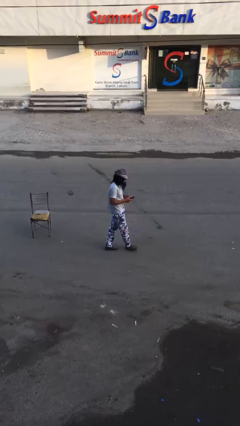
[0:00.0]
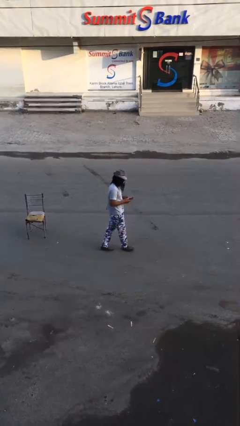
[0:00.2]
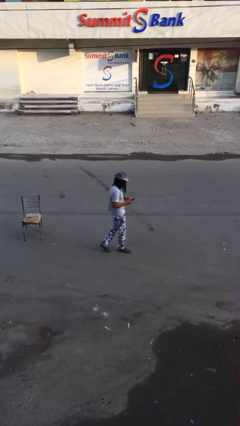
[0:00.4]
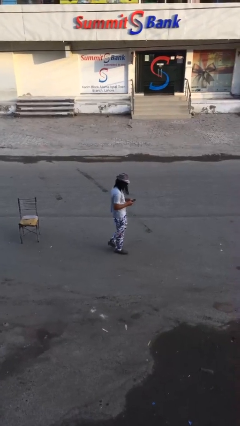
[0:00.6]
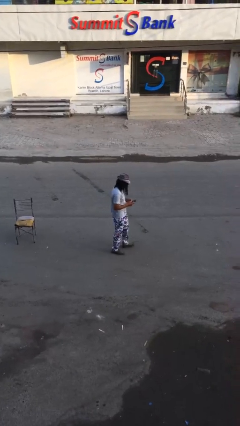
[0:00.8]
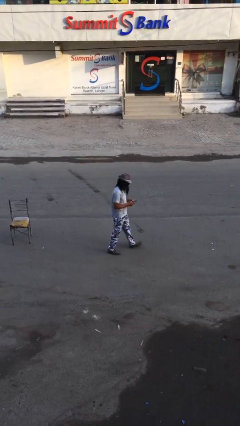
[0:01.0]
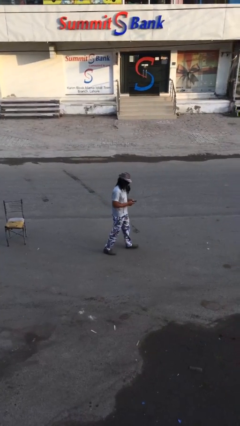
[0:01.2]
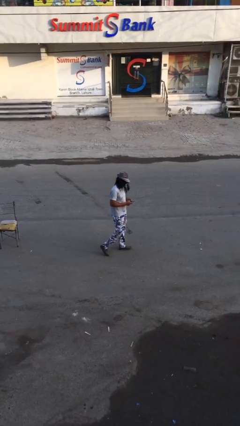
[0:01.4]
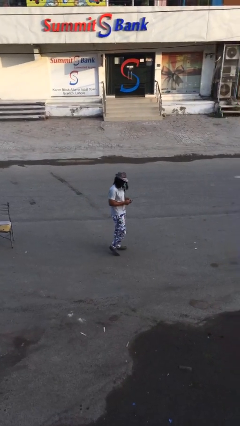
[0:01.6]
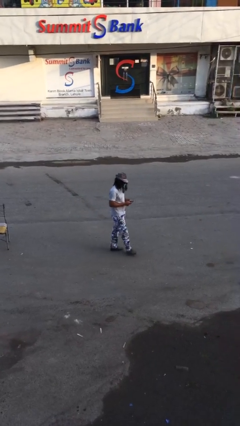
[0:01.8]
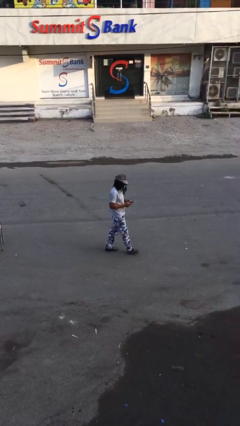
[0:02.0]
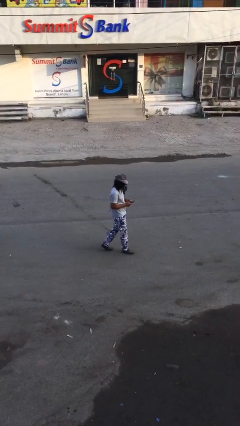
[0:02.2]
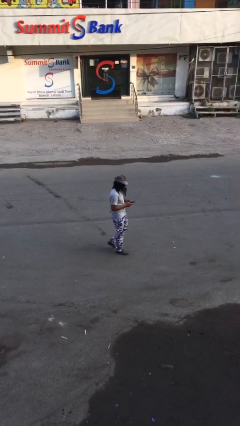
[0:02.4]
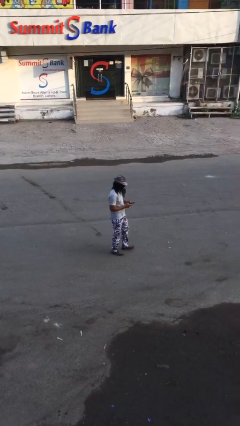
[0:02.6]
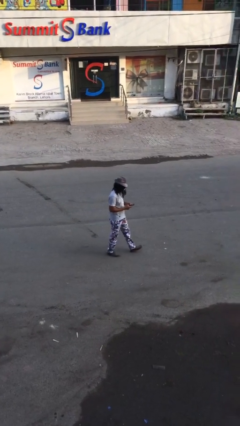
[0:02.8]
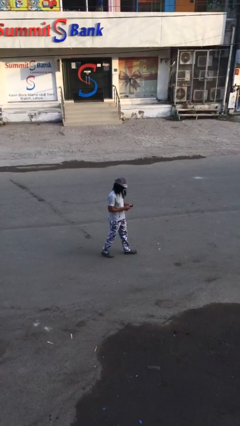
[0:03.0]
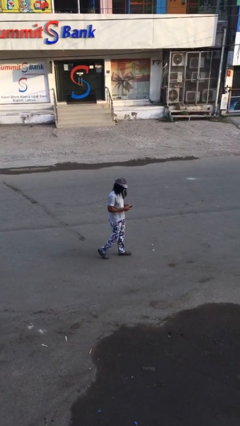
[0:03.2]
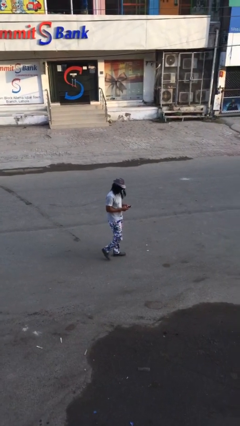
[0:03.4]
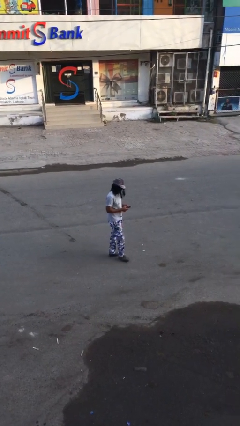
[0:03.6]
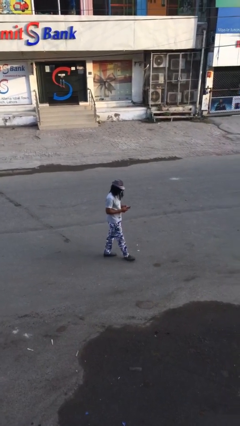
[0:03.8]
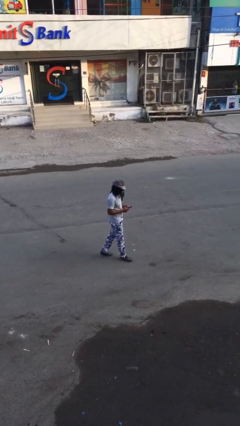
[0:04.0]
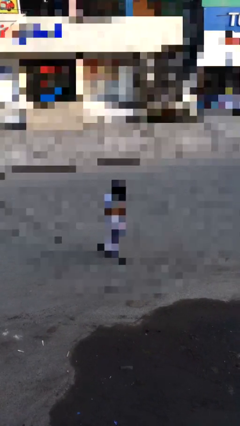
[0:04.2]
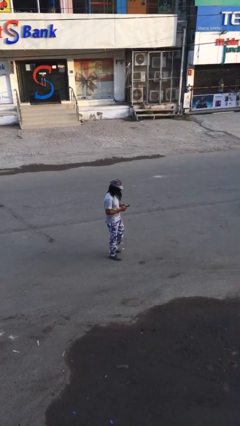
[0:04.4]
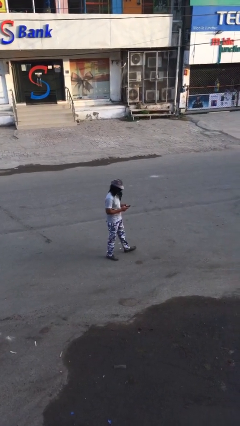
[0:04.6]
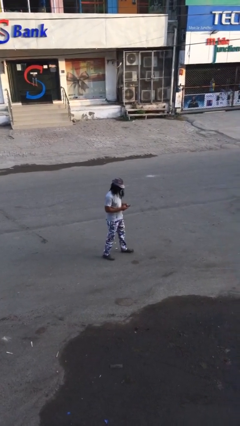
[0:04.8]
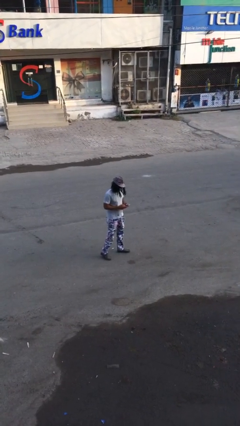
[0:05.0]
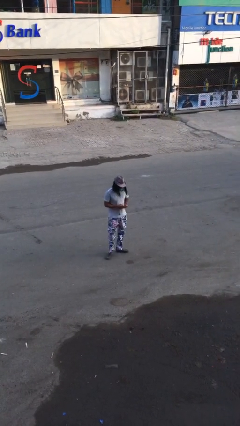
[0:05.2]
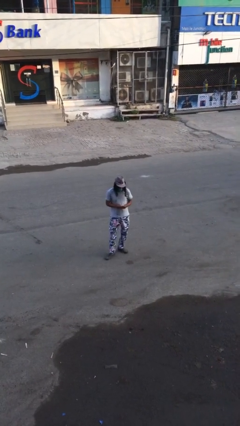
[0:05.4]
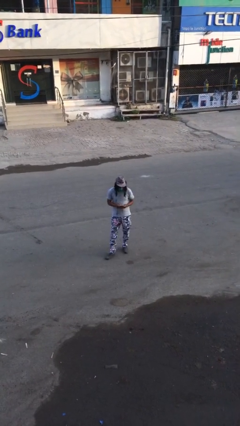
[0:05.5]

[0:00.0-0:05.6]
person texts on phone

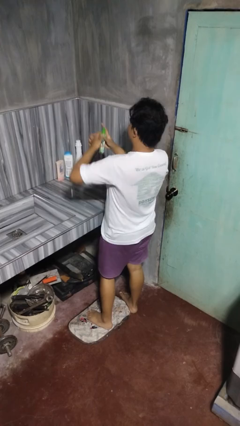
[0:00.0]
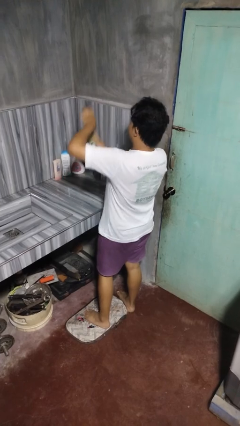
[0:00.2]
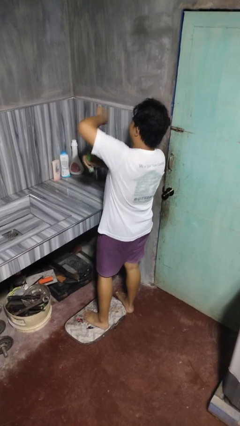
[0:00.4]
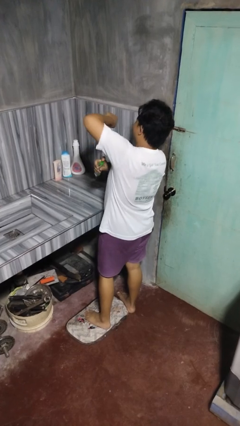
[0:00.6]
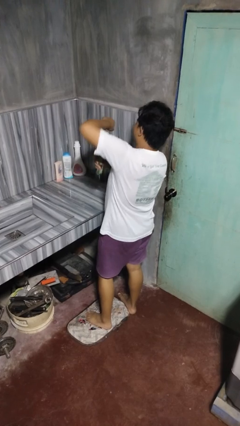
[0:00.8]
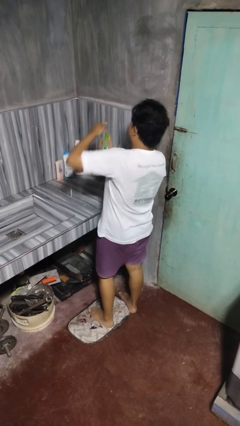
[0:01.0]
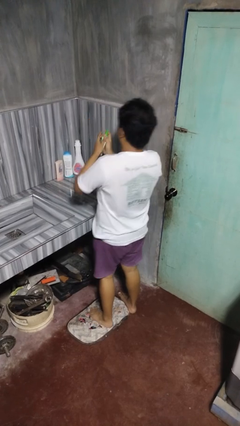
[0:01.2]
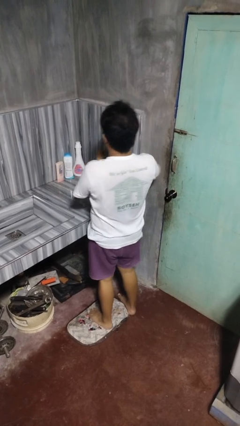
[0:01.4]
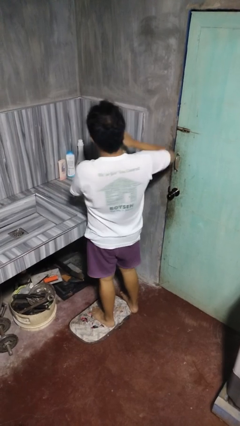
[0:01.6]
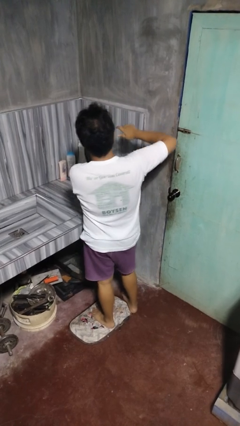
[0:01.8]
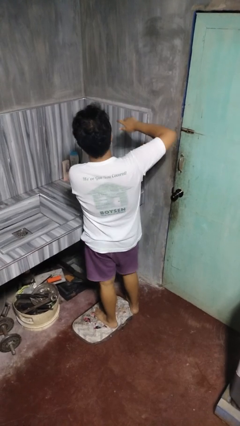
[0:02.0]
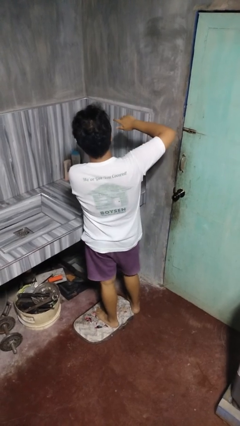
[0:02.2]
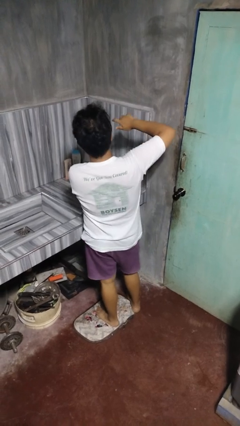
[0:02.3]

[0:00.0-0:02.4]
person applies deodorant

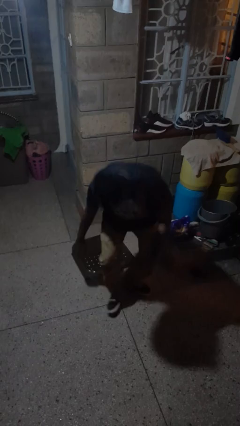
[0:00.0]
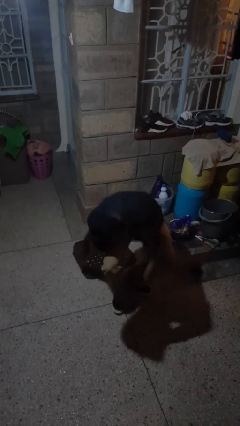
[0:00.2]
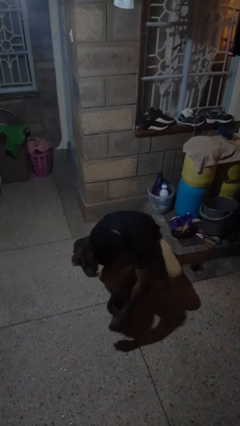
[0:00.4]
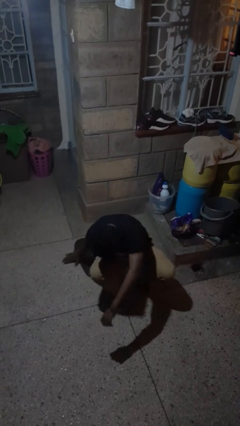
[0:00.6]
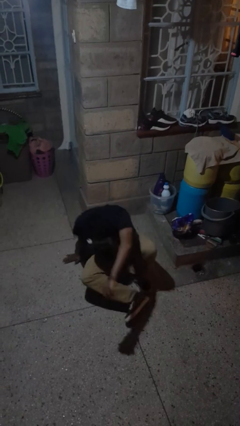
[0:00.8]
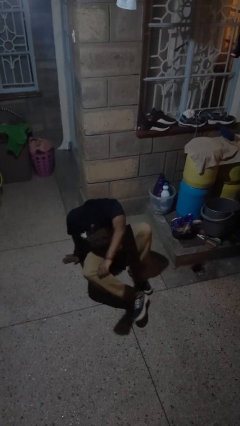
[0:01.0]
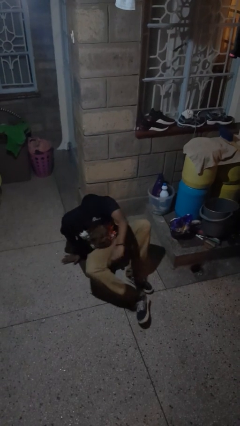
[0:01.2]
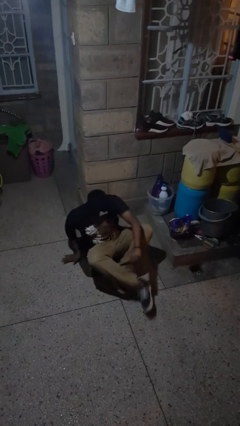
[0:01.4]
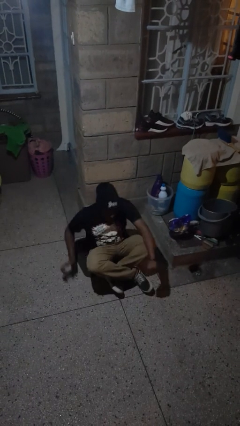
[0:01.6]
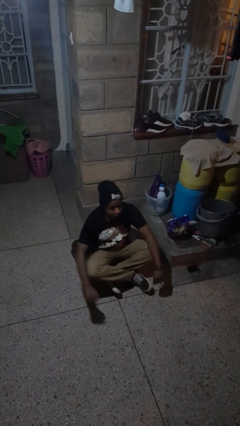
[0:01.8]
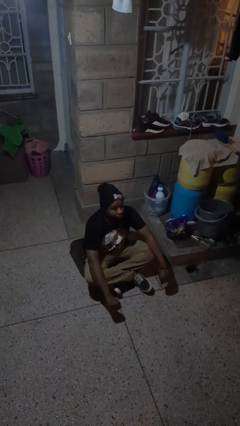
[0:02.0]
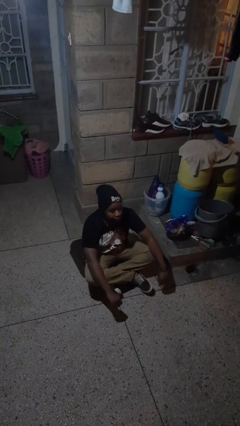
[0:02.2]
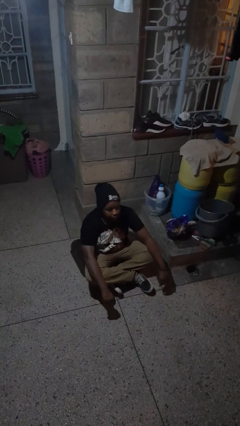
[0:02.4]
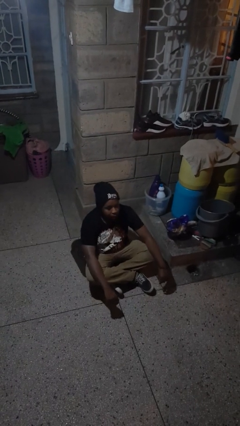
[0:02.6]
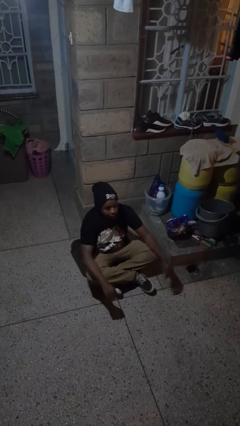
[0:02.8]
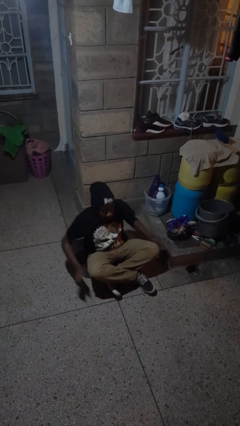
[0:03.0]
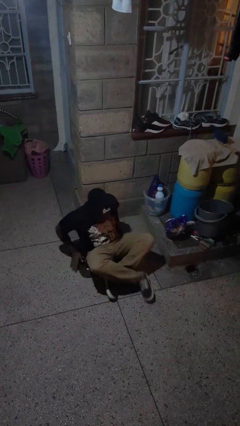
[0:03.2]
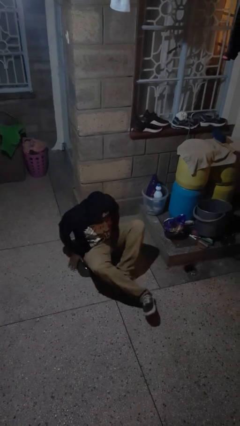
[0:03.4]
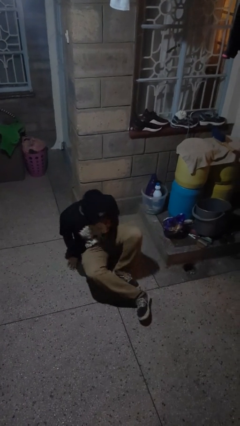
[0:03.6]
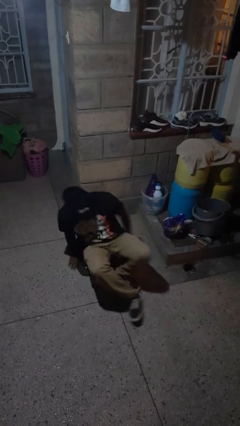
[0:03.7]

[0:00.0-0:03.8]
person sits crisscross

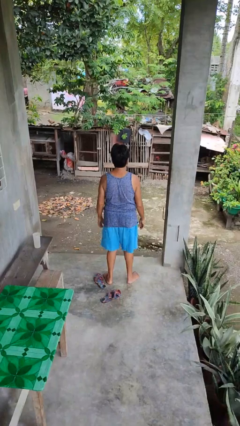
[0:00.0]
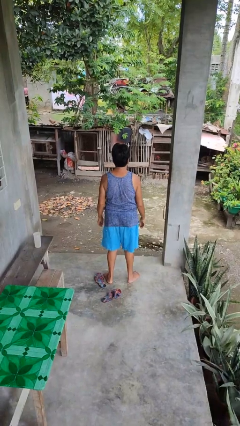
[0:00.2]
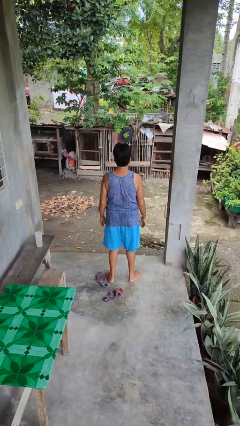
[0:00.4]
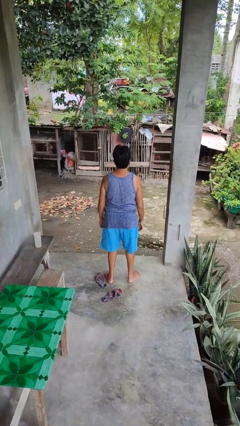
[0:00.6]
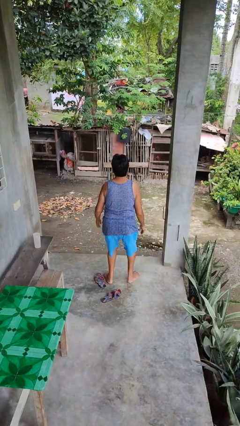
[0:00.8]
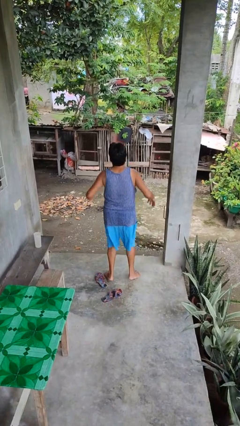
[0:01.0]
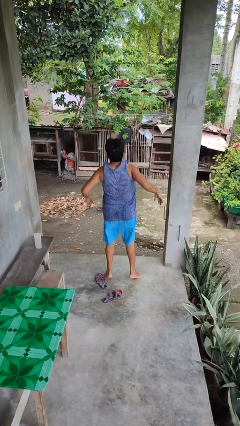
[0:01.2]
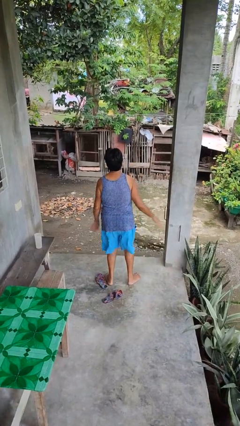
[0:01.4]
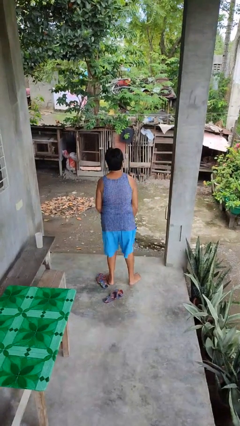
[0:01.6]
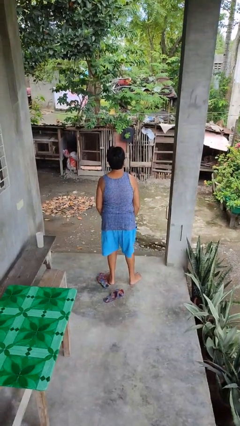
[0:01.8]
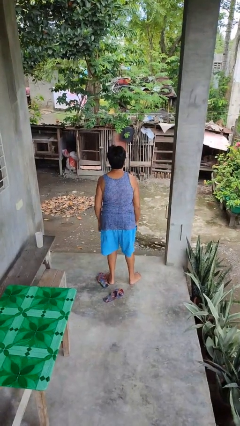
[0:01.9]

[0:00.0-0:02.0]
person jumps

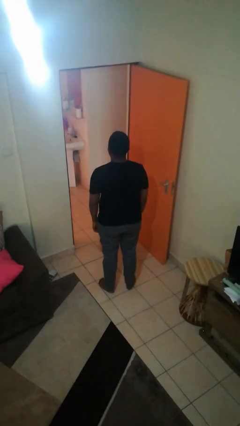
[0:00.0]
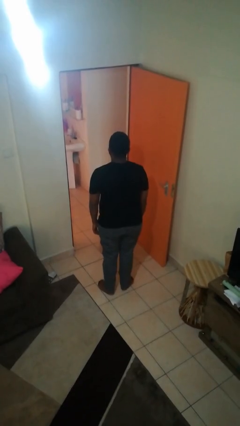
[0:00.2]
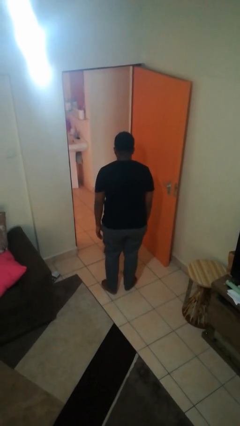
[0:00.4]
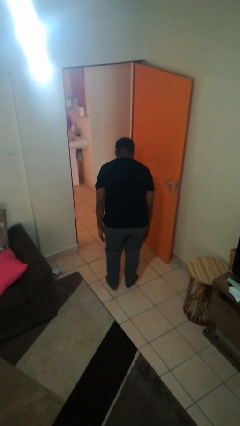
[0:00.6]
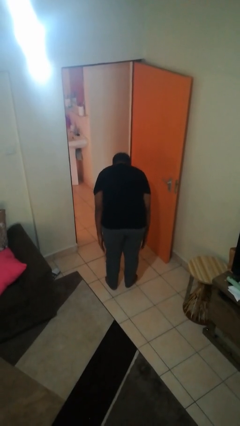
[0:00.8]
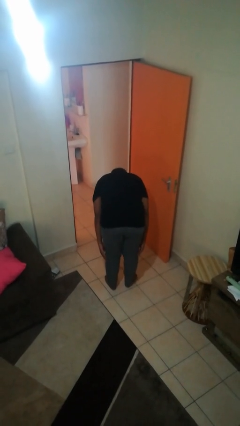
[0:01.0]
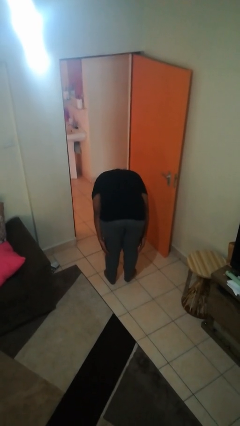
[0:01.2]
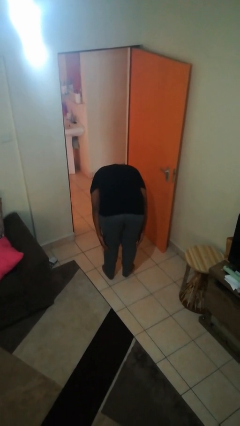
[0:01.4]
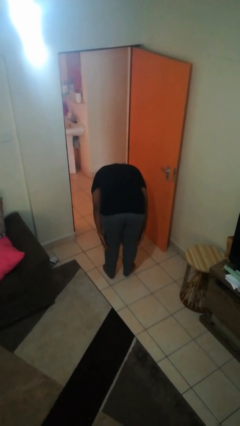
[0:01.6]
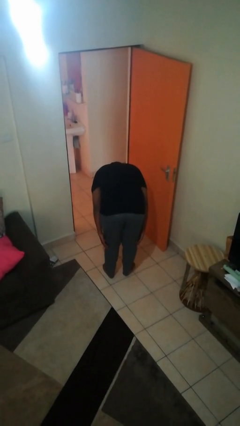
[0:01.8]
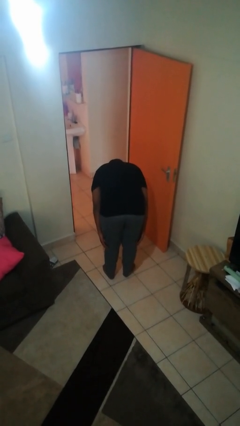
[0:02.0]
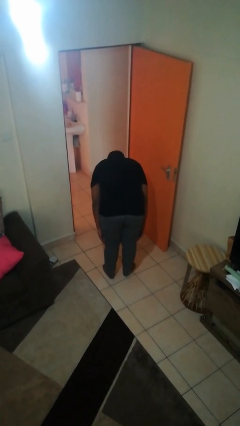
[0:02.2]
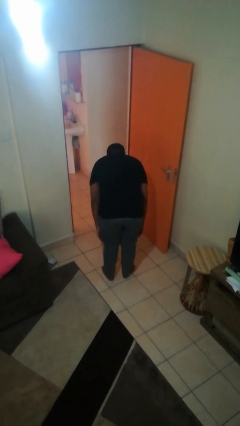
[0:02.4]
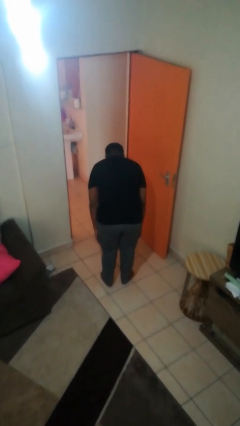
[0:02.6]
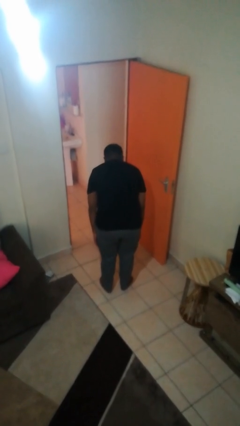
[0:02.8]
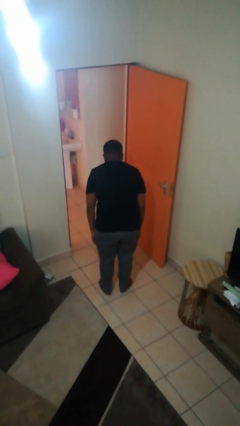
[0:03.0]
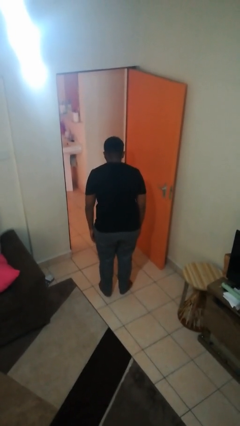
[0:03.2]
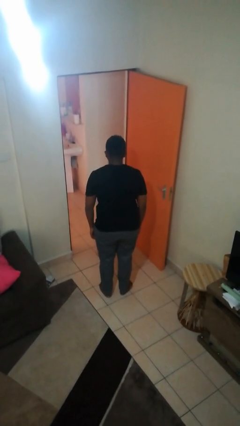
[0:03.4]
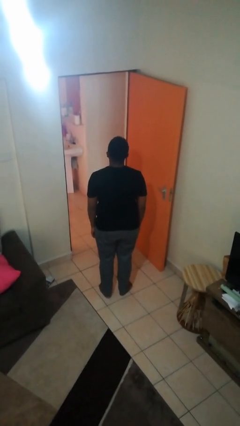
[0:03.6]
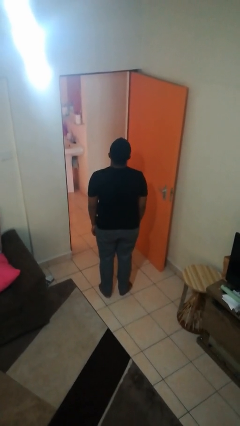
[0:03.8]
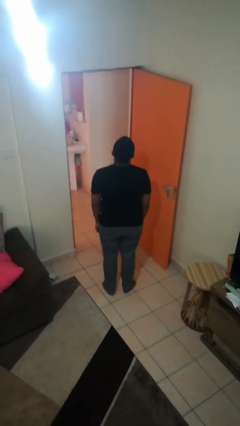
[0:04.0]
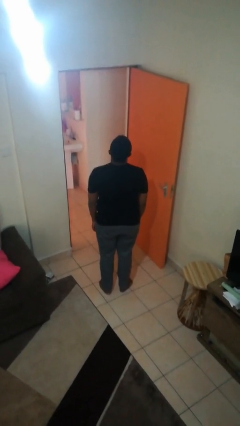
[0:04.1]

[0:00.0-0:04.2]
person bows
